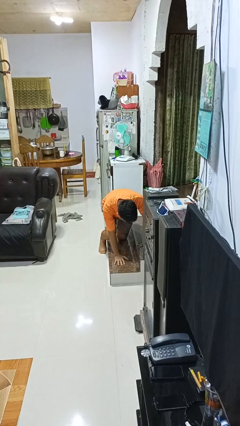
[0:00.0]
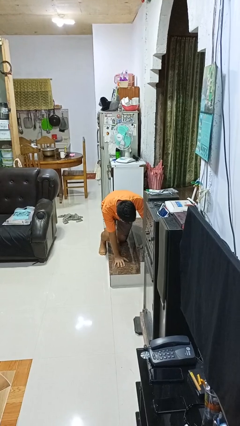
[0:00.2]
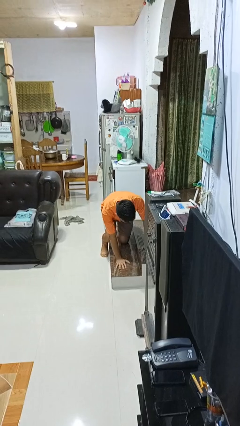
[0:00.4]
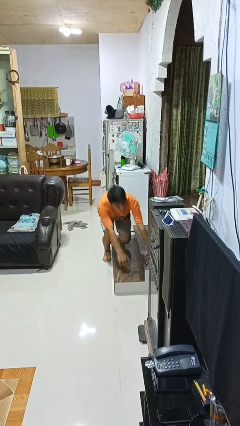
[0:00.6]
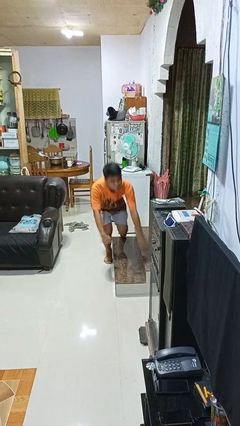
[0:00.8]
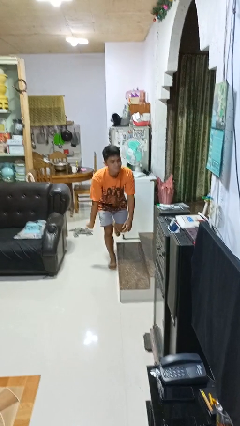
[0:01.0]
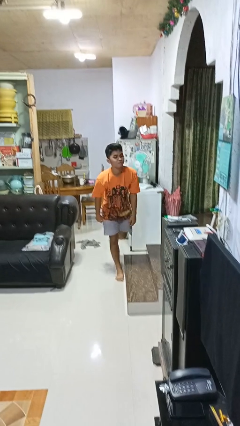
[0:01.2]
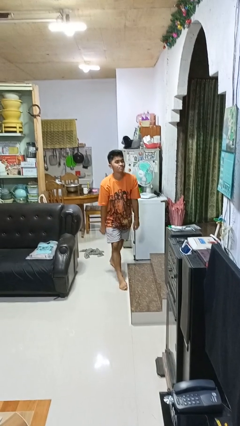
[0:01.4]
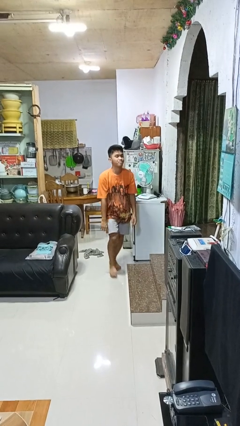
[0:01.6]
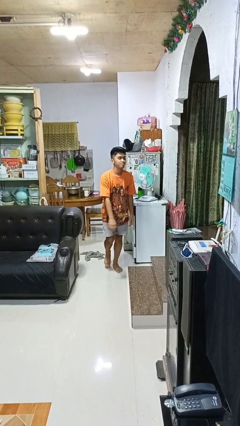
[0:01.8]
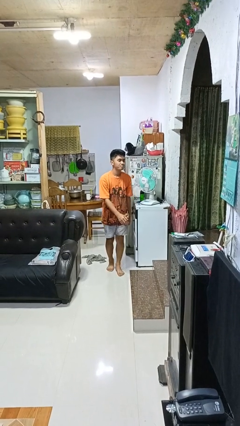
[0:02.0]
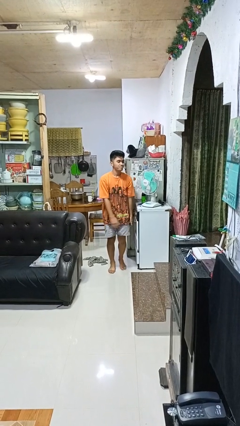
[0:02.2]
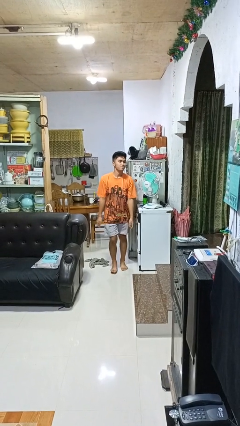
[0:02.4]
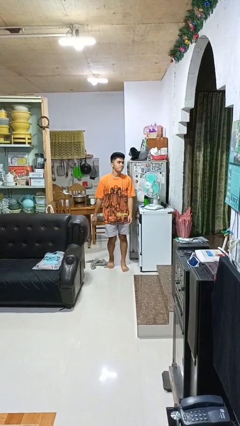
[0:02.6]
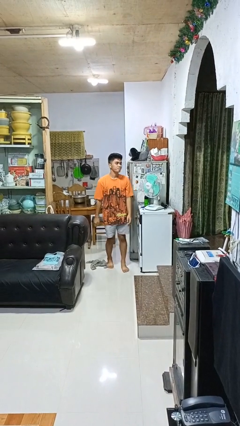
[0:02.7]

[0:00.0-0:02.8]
person stands up from floor

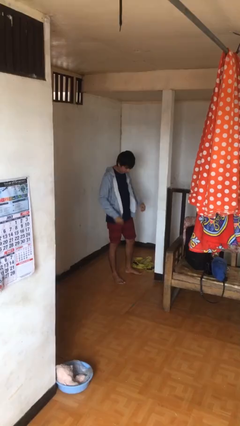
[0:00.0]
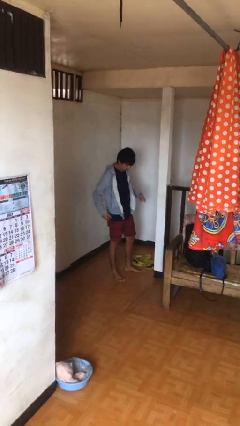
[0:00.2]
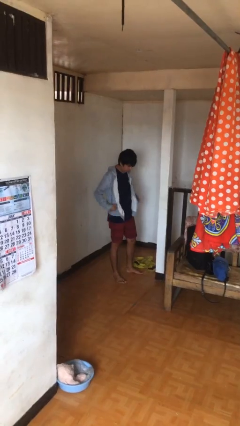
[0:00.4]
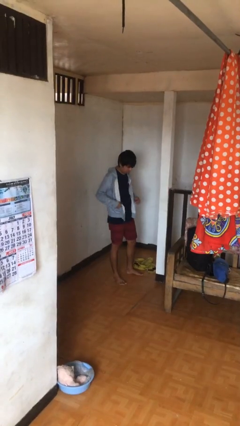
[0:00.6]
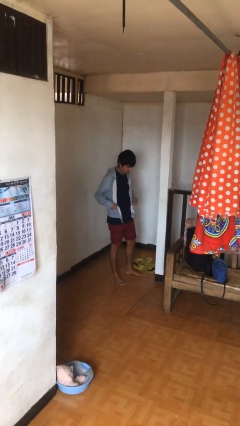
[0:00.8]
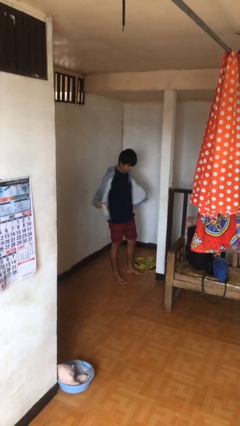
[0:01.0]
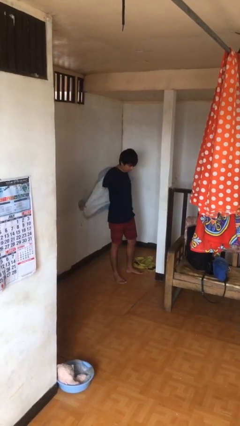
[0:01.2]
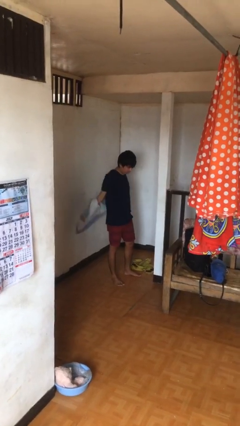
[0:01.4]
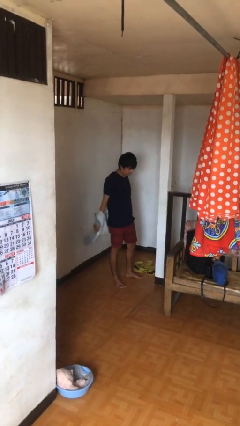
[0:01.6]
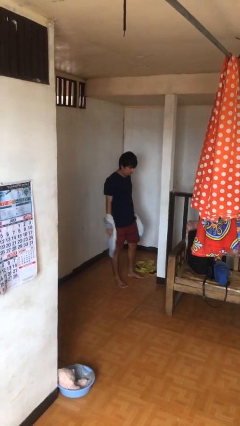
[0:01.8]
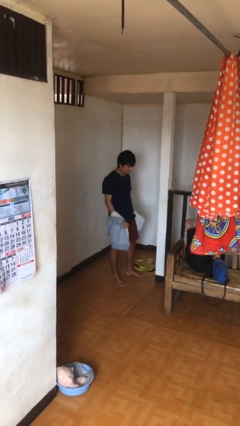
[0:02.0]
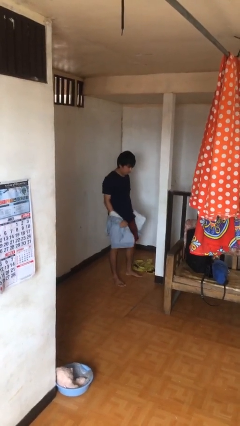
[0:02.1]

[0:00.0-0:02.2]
person takes off jacket

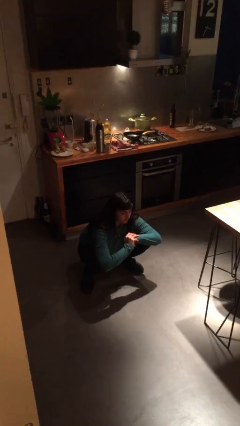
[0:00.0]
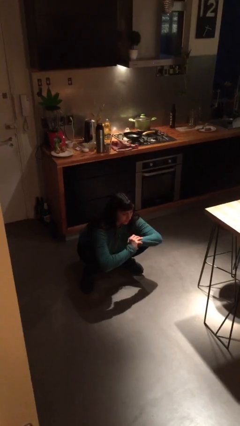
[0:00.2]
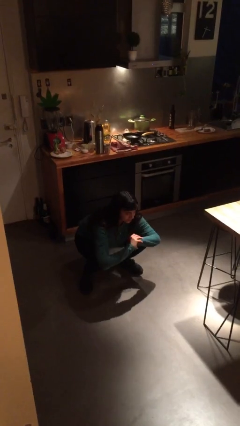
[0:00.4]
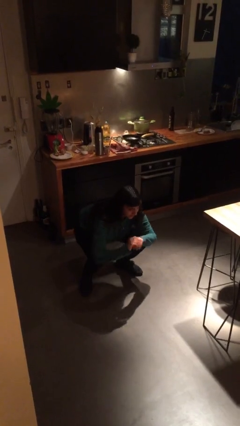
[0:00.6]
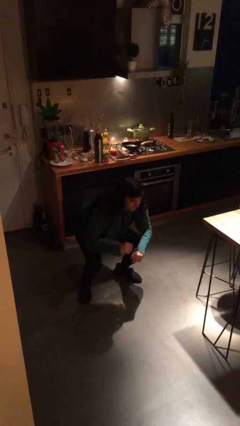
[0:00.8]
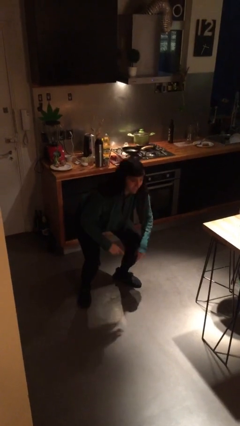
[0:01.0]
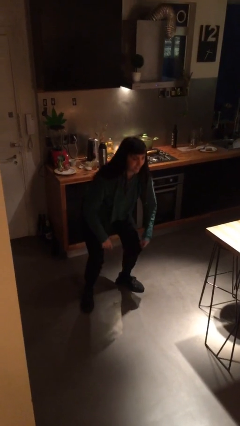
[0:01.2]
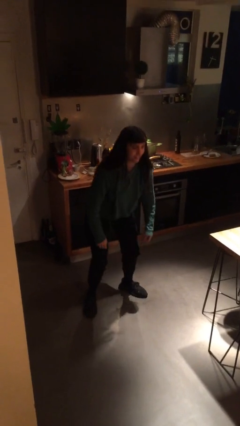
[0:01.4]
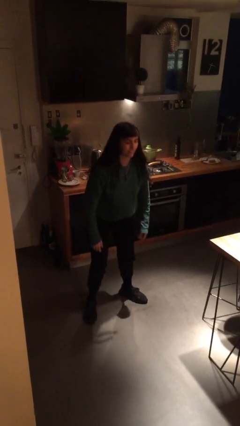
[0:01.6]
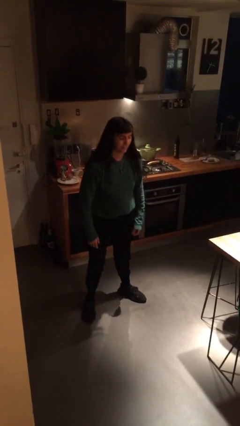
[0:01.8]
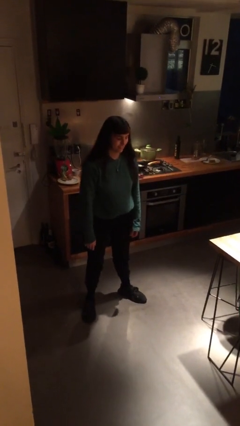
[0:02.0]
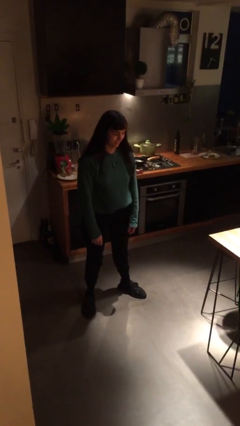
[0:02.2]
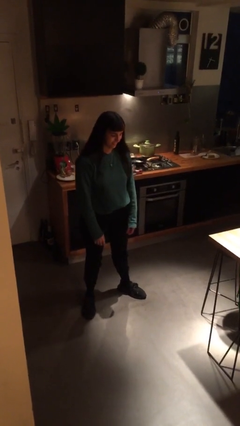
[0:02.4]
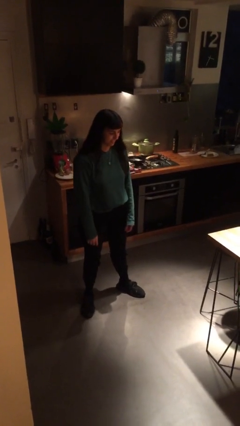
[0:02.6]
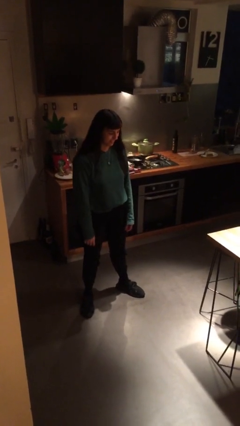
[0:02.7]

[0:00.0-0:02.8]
person stands up

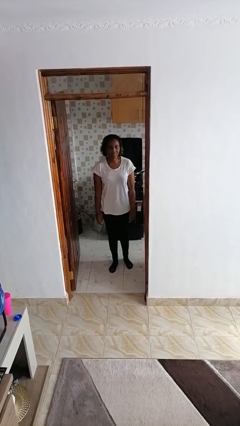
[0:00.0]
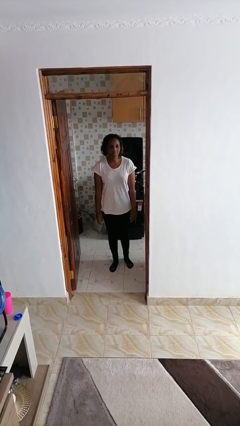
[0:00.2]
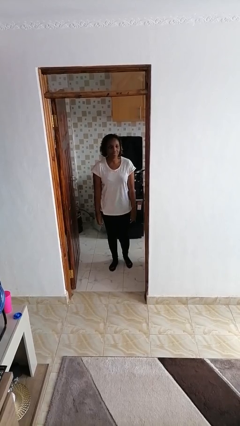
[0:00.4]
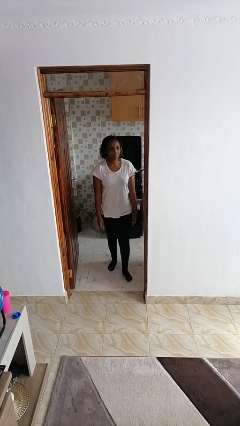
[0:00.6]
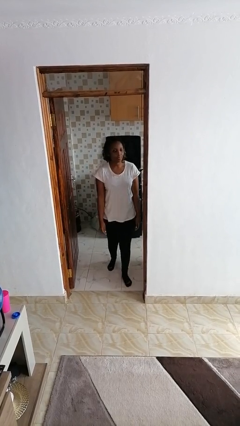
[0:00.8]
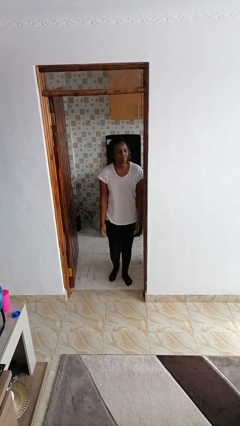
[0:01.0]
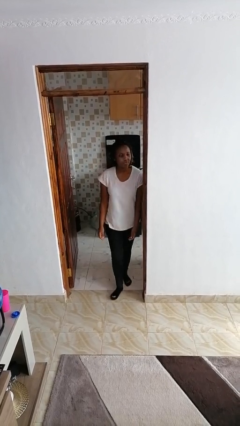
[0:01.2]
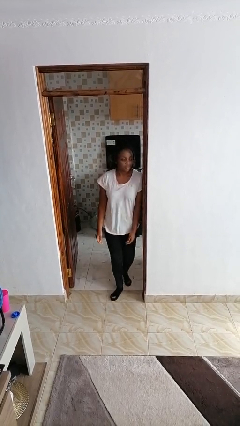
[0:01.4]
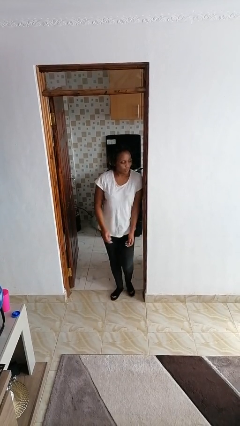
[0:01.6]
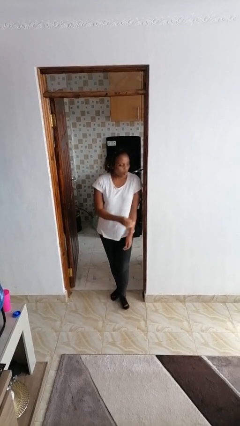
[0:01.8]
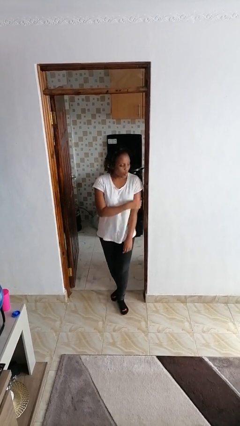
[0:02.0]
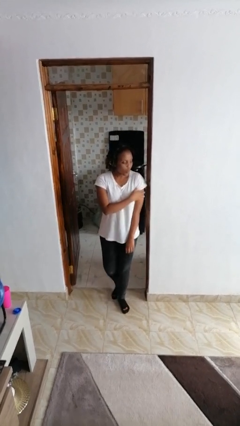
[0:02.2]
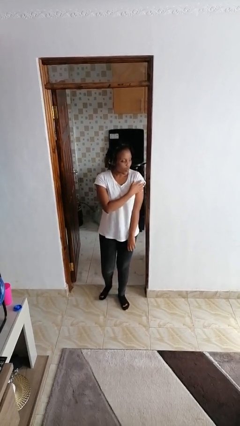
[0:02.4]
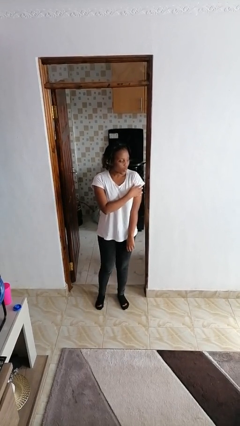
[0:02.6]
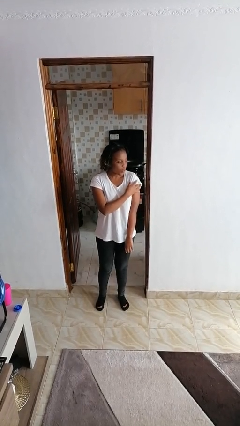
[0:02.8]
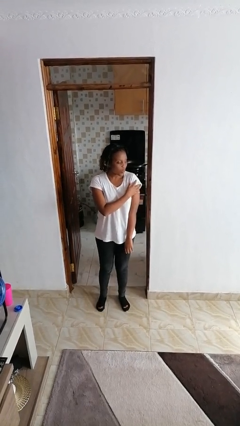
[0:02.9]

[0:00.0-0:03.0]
person bumps into wall

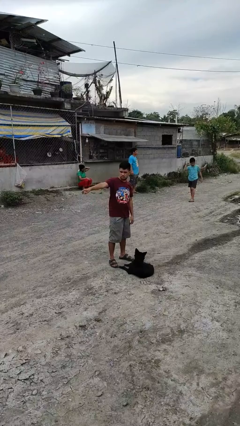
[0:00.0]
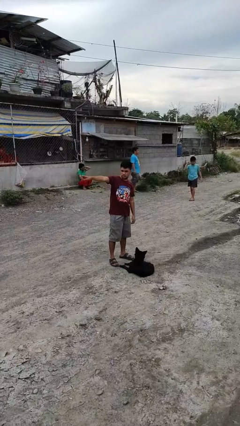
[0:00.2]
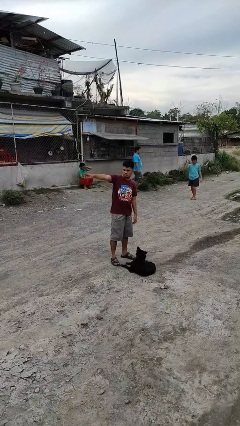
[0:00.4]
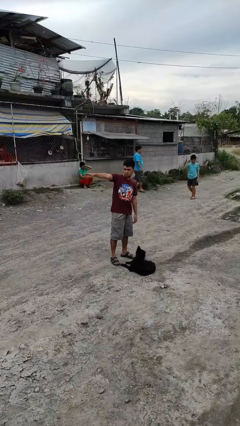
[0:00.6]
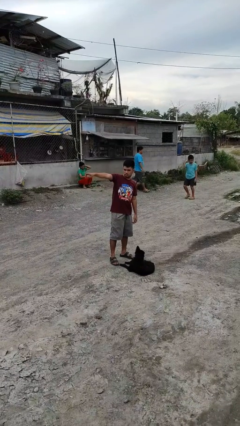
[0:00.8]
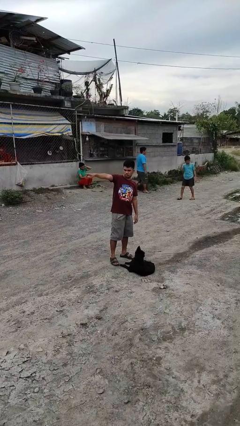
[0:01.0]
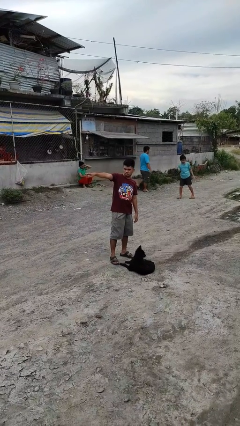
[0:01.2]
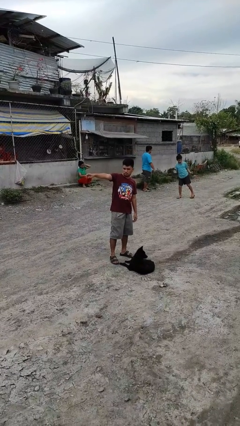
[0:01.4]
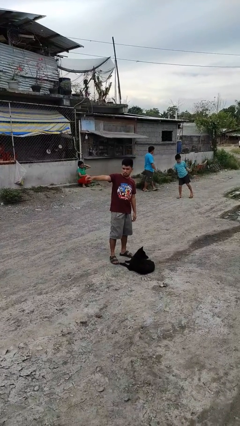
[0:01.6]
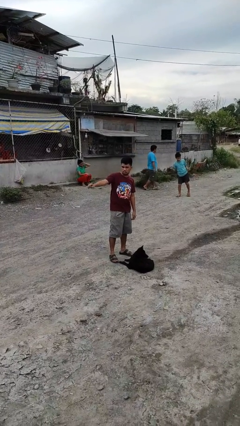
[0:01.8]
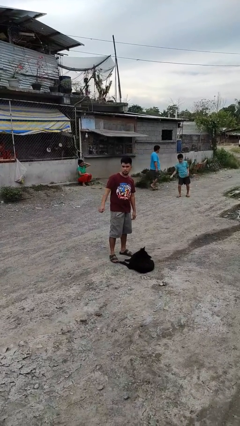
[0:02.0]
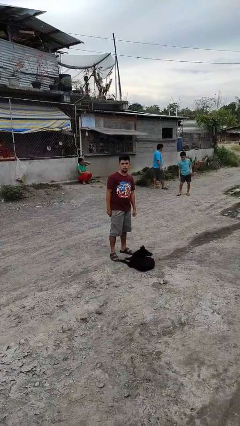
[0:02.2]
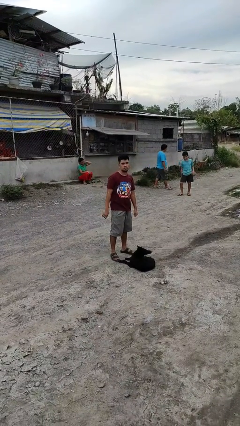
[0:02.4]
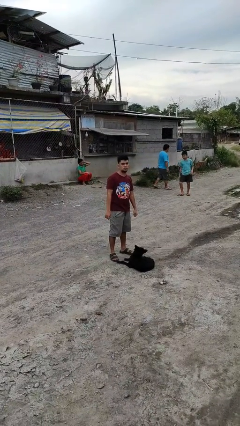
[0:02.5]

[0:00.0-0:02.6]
person points at person

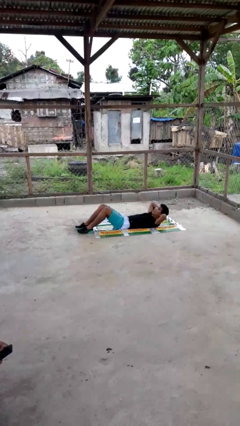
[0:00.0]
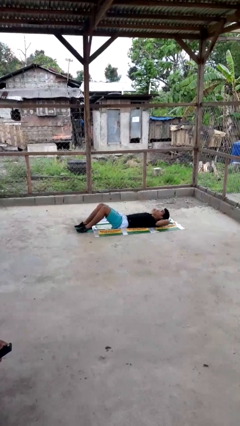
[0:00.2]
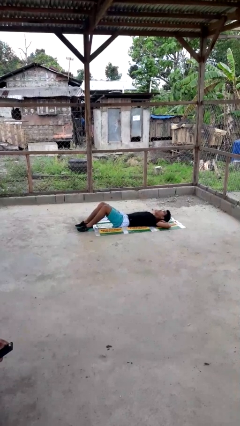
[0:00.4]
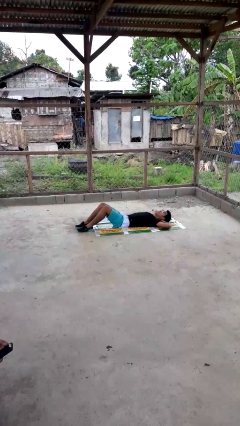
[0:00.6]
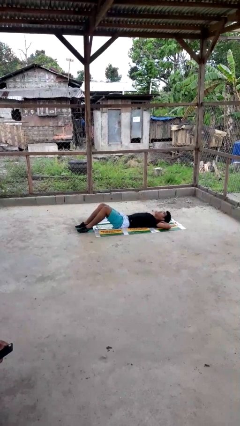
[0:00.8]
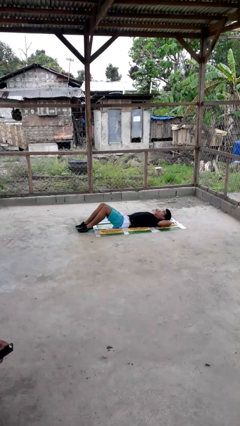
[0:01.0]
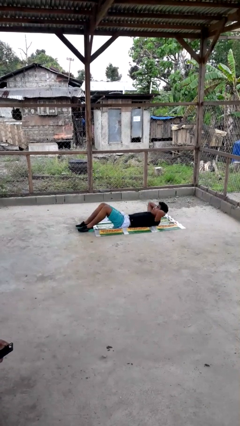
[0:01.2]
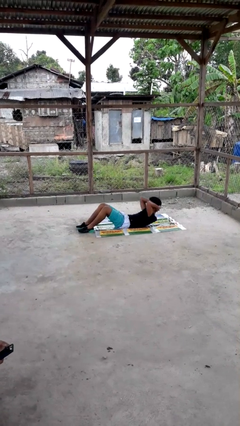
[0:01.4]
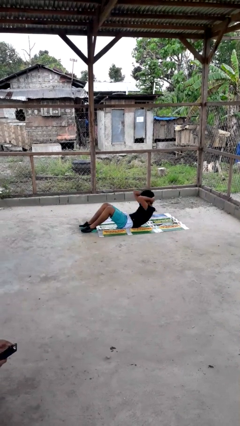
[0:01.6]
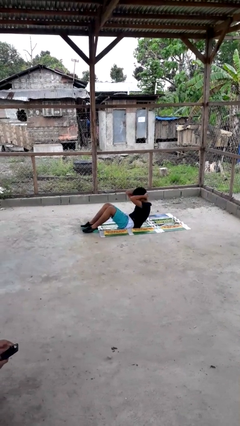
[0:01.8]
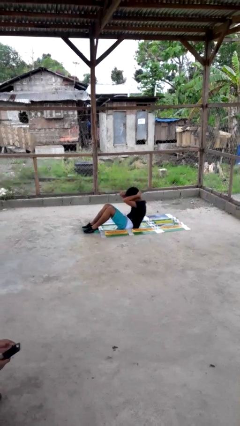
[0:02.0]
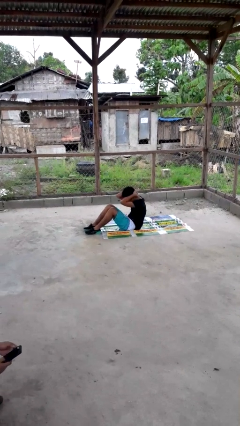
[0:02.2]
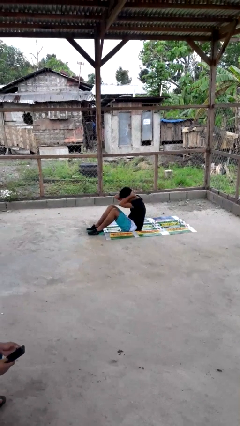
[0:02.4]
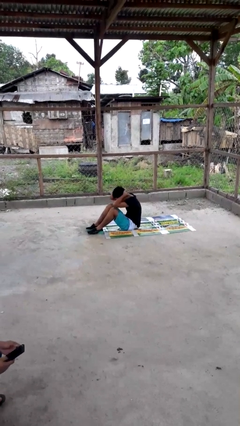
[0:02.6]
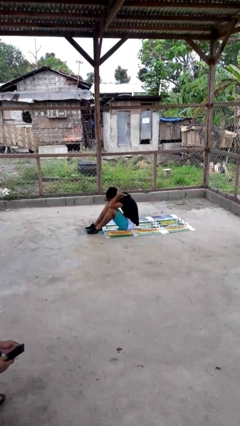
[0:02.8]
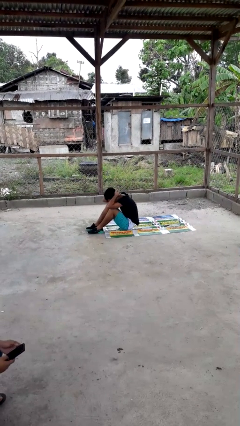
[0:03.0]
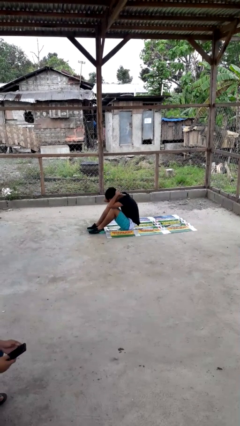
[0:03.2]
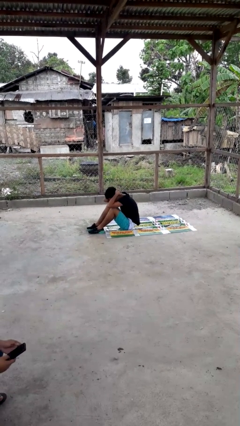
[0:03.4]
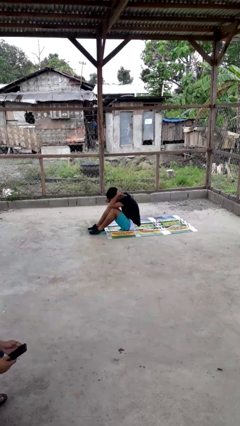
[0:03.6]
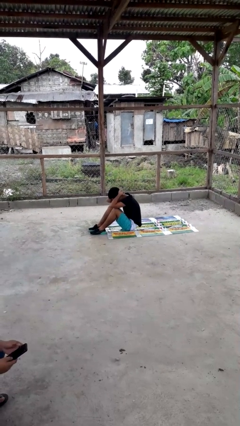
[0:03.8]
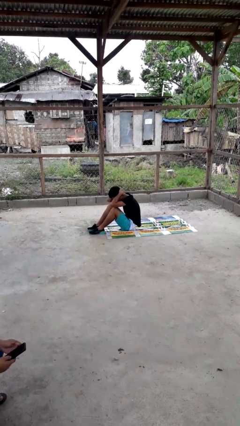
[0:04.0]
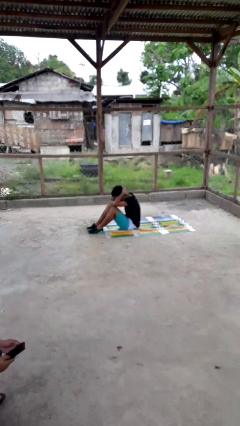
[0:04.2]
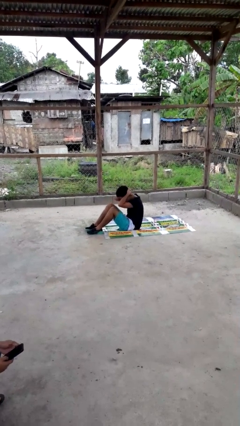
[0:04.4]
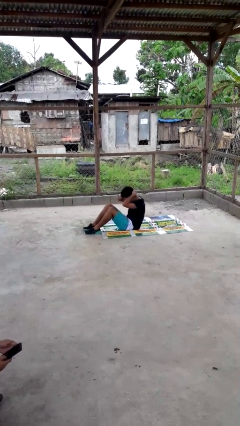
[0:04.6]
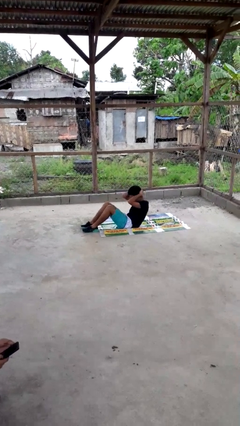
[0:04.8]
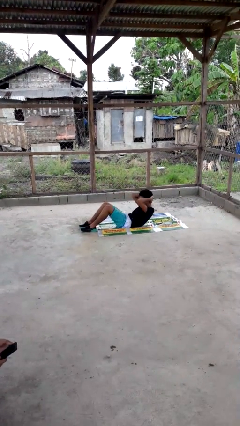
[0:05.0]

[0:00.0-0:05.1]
person exercises with situp
